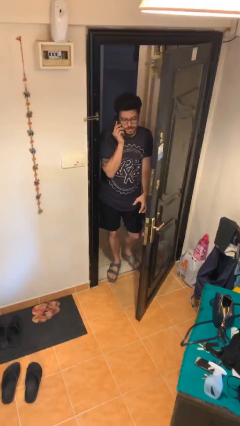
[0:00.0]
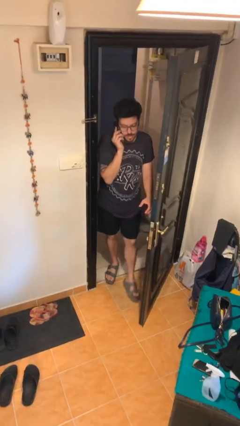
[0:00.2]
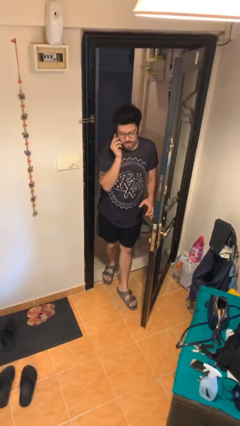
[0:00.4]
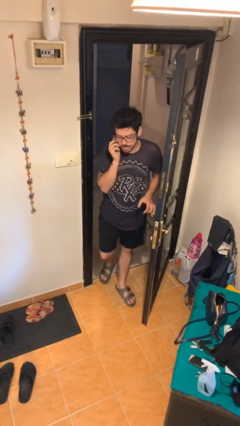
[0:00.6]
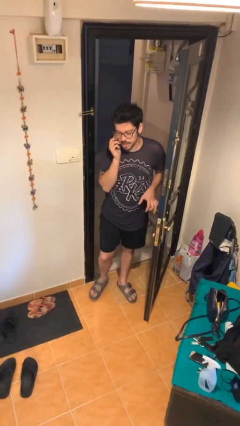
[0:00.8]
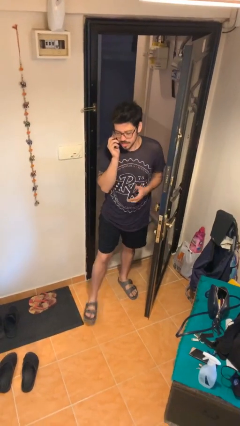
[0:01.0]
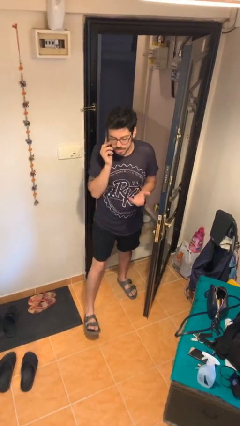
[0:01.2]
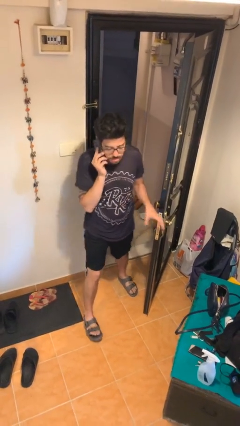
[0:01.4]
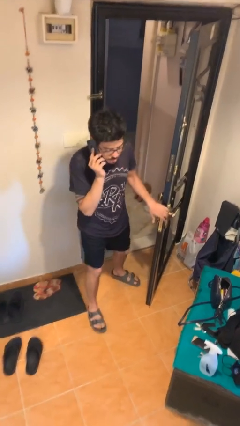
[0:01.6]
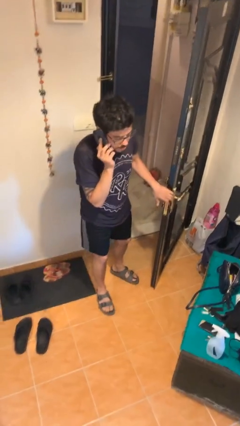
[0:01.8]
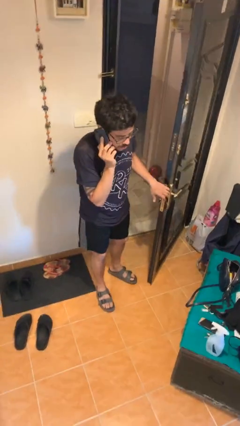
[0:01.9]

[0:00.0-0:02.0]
person enters scene through structure

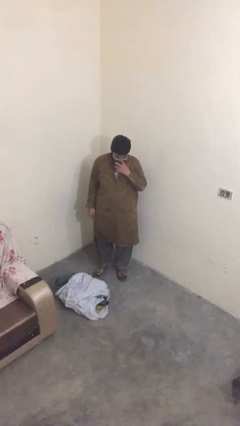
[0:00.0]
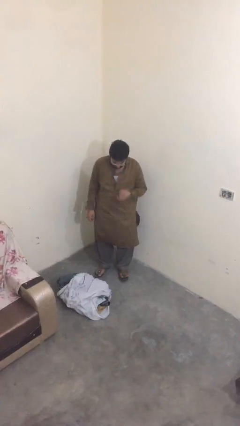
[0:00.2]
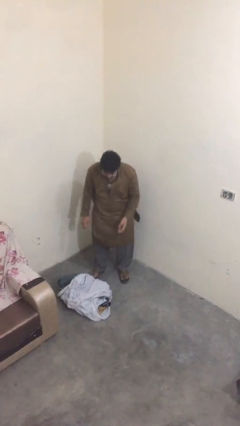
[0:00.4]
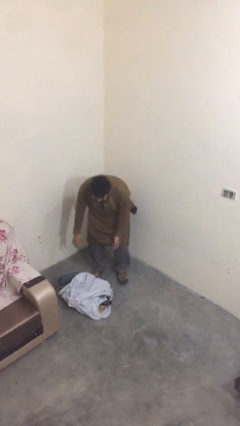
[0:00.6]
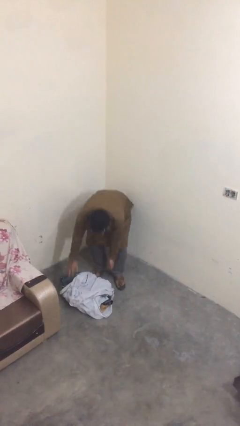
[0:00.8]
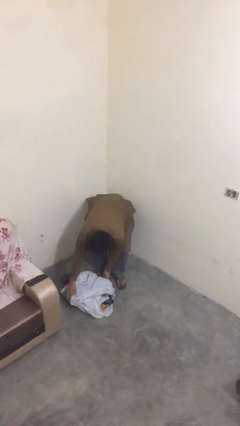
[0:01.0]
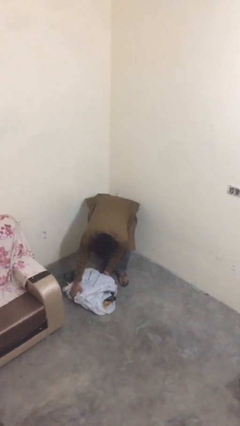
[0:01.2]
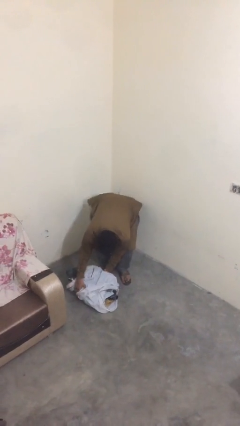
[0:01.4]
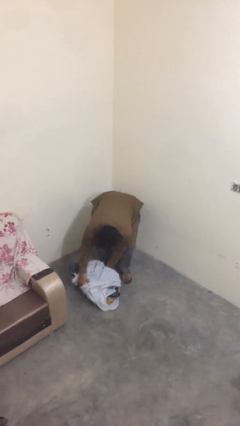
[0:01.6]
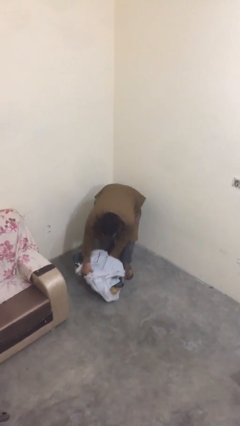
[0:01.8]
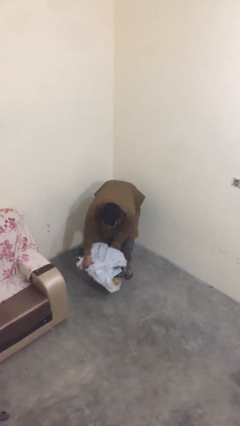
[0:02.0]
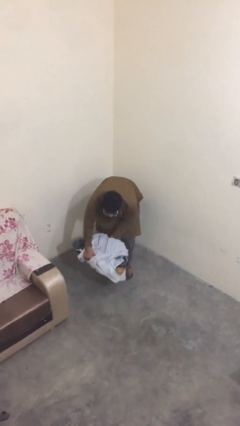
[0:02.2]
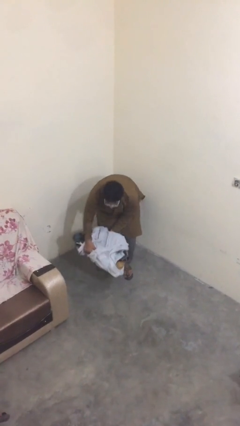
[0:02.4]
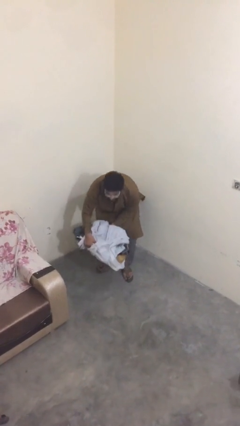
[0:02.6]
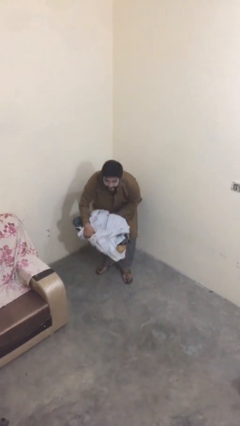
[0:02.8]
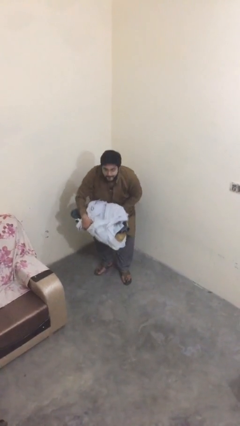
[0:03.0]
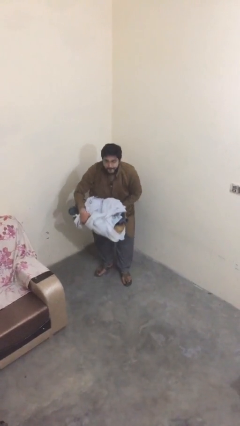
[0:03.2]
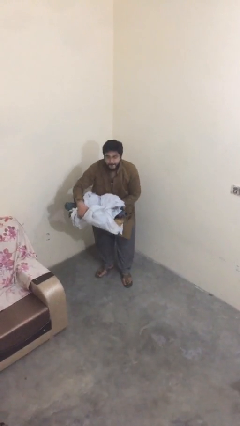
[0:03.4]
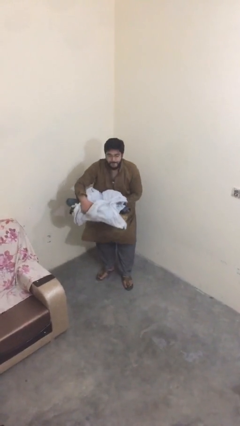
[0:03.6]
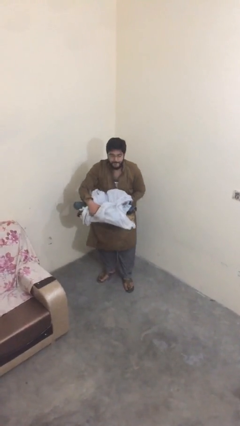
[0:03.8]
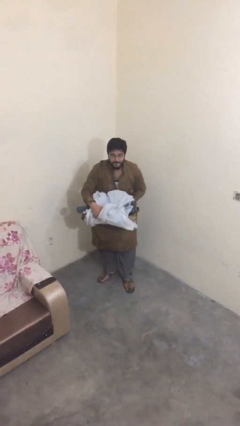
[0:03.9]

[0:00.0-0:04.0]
person picks up object from floor

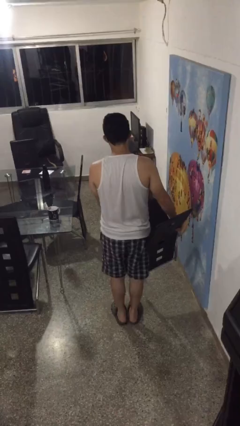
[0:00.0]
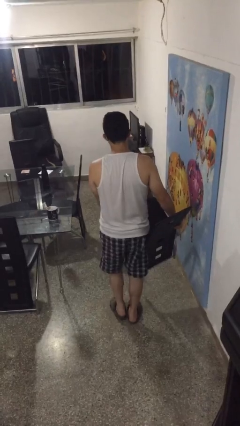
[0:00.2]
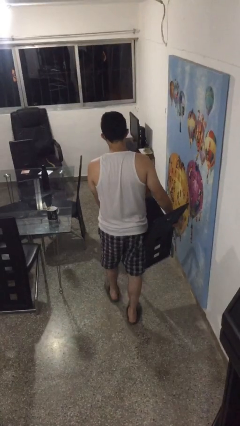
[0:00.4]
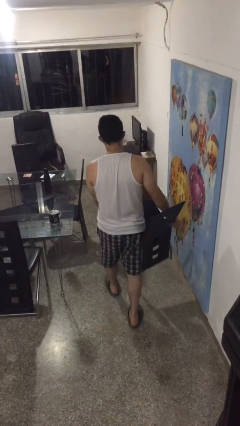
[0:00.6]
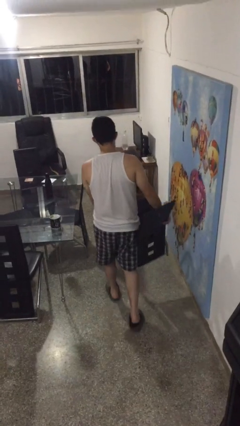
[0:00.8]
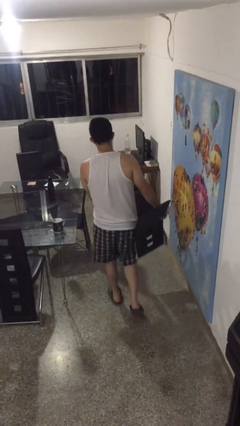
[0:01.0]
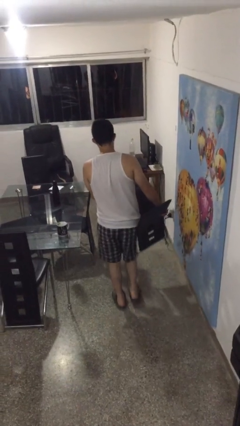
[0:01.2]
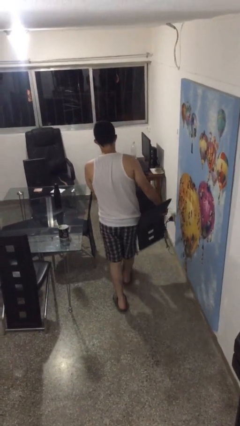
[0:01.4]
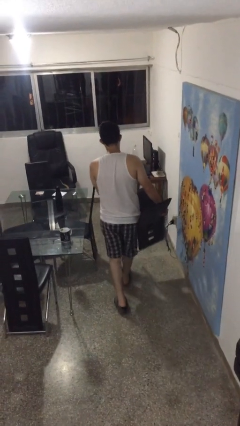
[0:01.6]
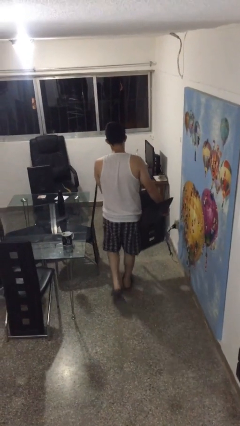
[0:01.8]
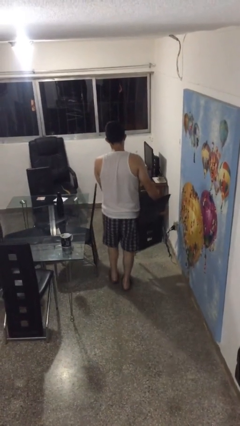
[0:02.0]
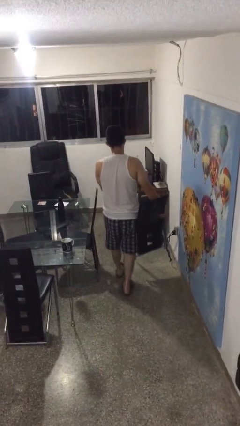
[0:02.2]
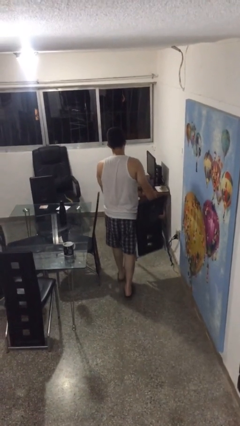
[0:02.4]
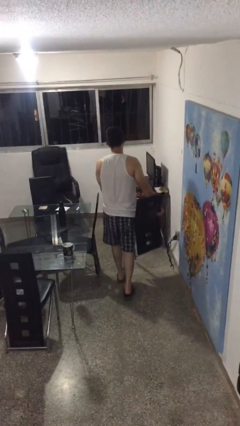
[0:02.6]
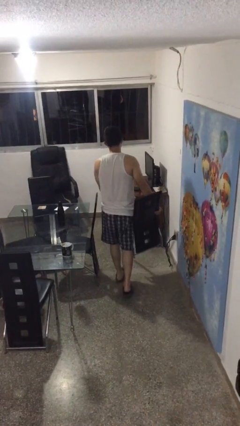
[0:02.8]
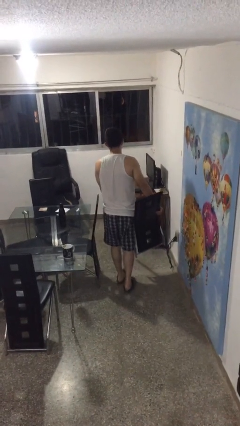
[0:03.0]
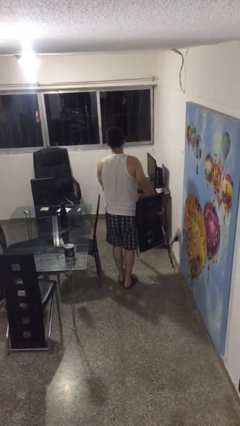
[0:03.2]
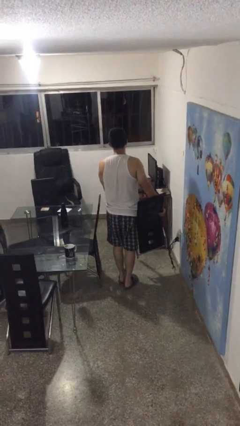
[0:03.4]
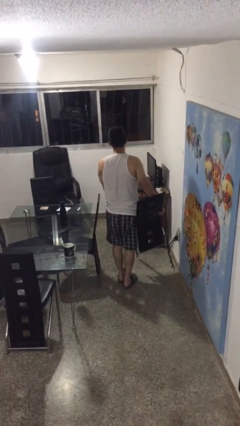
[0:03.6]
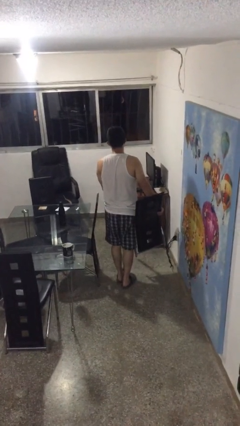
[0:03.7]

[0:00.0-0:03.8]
person carries furniture

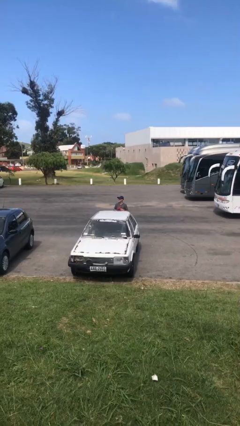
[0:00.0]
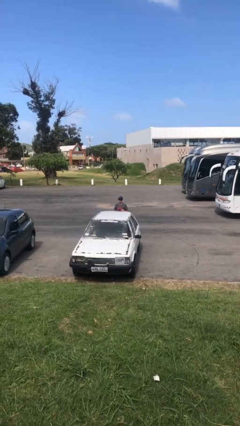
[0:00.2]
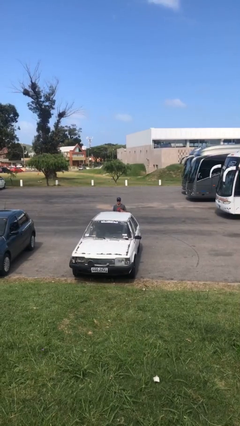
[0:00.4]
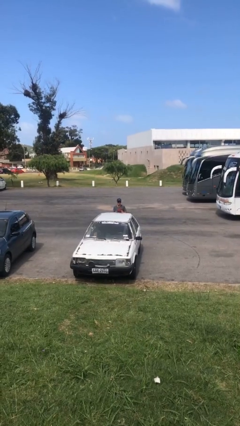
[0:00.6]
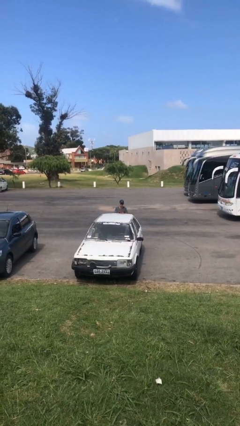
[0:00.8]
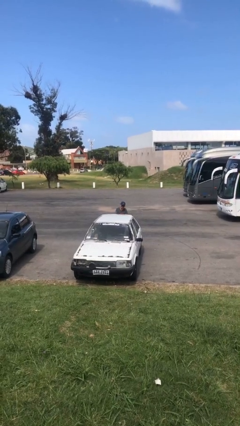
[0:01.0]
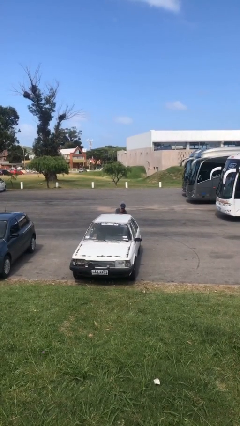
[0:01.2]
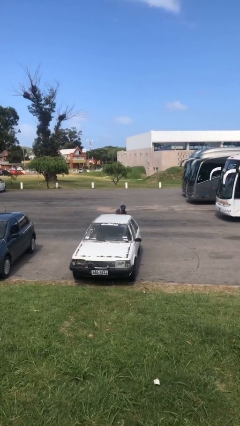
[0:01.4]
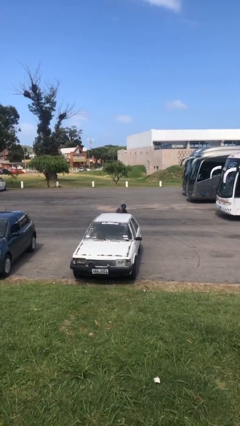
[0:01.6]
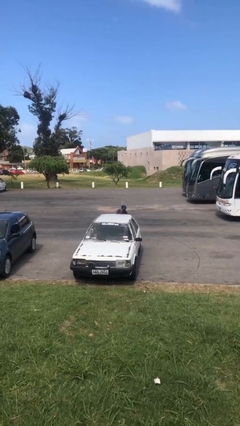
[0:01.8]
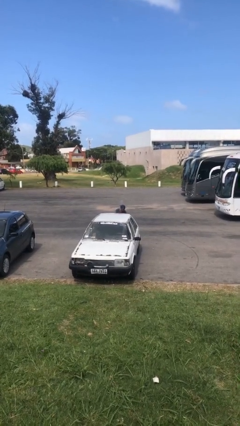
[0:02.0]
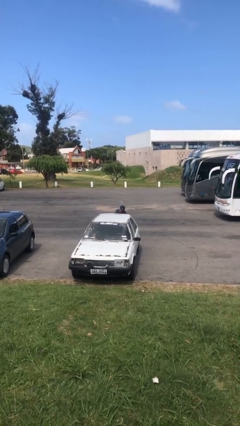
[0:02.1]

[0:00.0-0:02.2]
person loads car

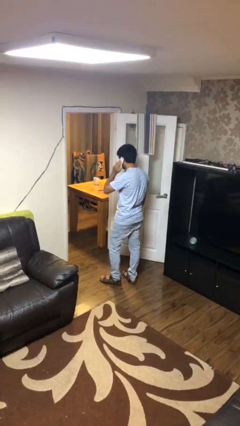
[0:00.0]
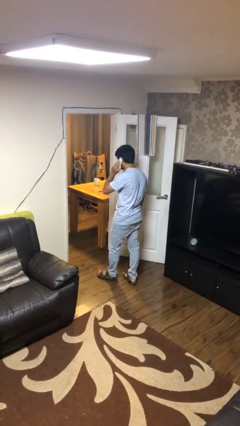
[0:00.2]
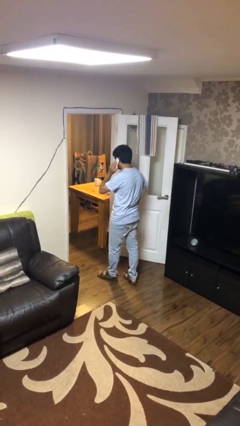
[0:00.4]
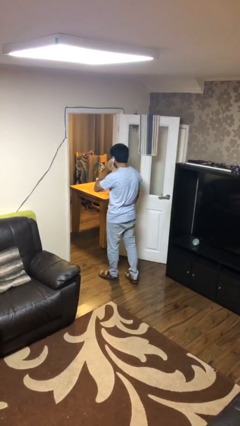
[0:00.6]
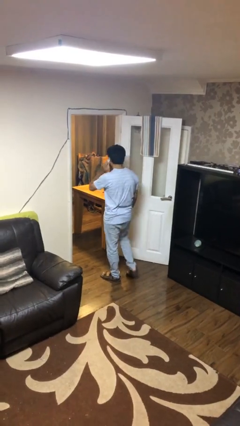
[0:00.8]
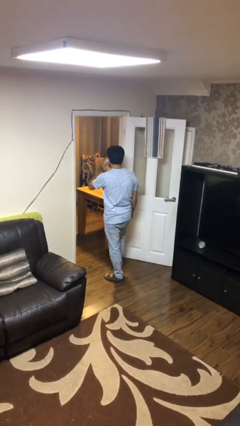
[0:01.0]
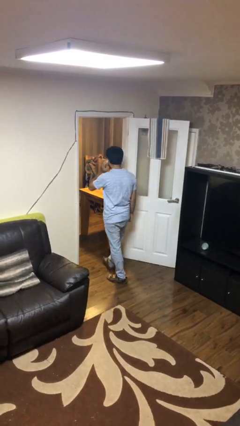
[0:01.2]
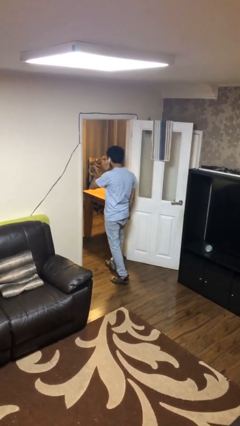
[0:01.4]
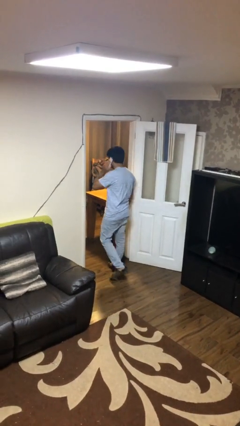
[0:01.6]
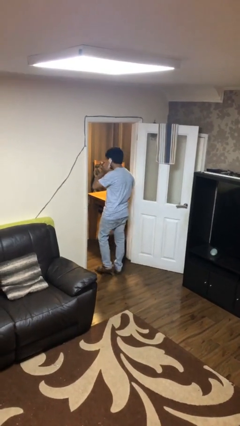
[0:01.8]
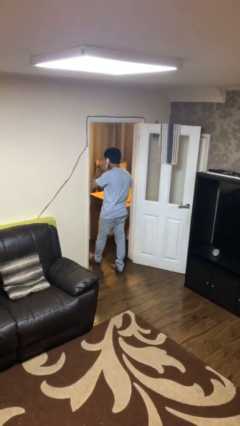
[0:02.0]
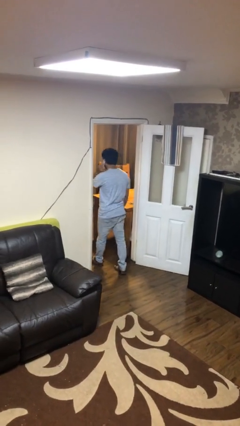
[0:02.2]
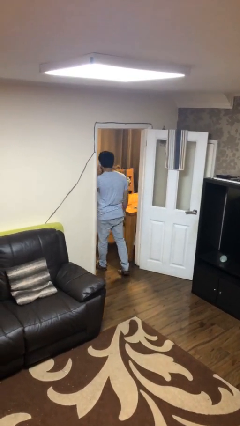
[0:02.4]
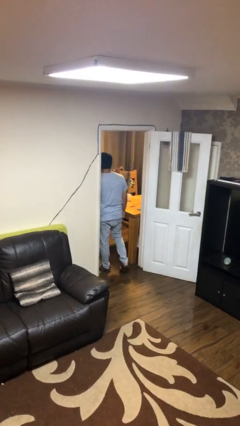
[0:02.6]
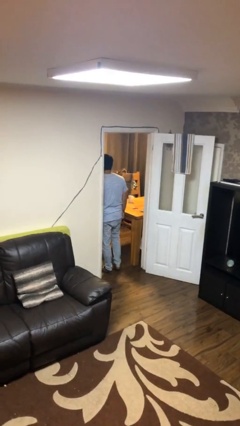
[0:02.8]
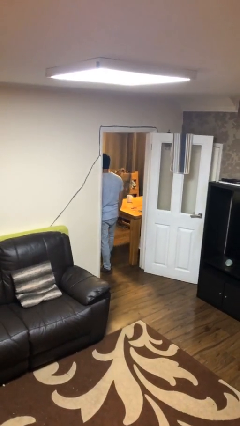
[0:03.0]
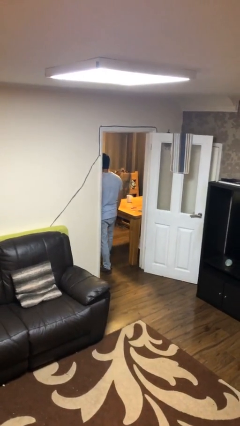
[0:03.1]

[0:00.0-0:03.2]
person exits scene through structure

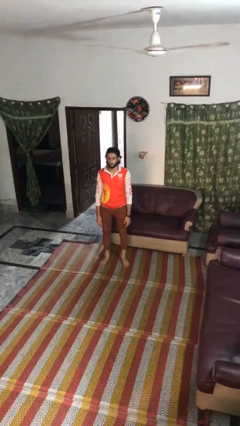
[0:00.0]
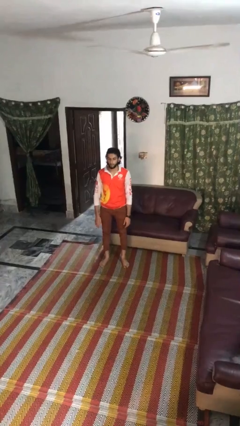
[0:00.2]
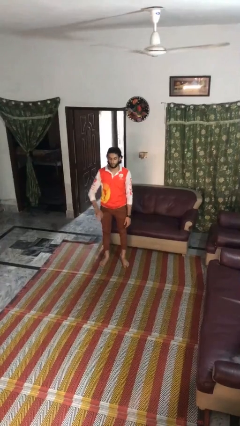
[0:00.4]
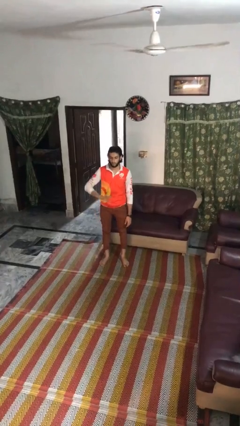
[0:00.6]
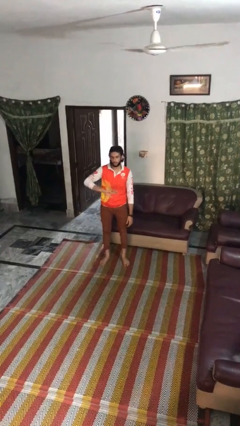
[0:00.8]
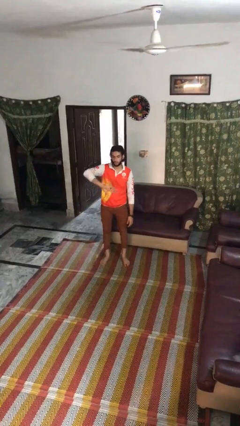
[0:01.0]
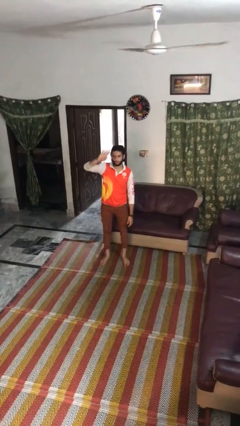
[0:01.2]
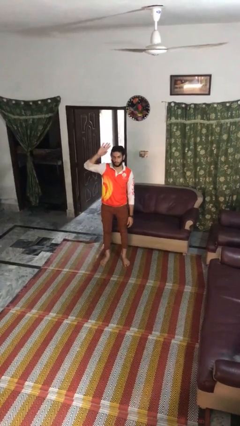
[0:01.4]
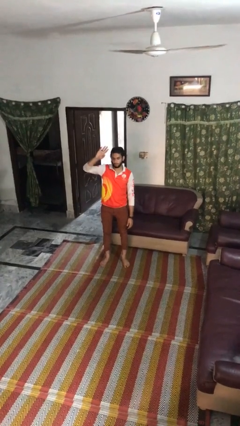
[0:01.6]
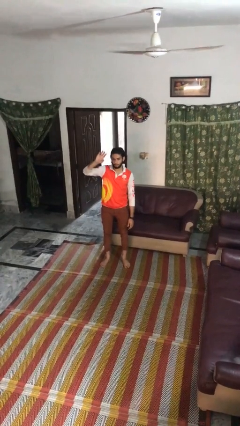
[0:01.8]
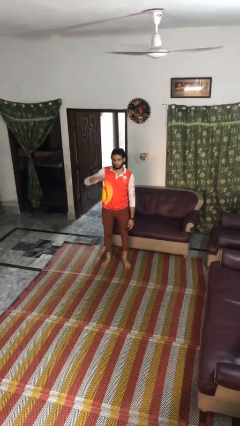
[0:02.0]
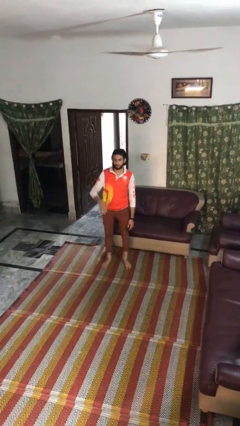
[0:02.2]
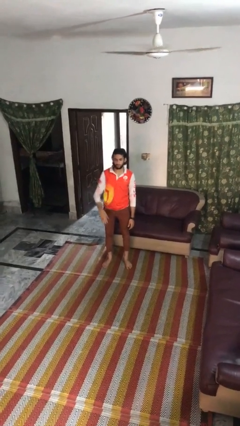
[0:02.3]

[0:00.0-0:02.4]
person gestures swipe up

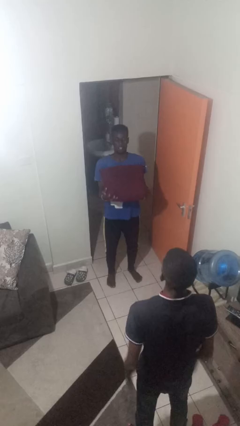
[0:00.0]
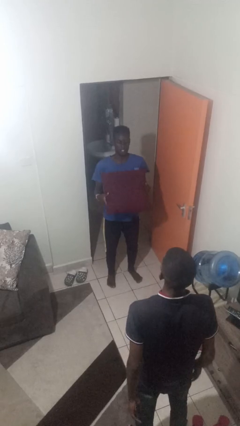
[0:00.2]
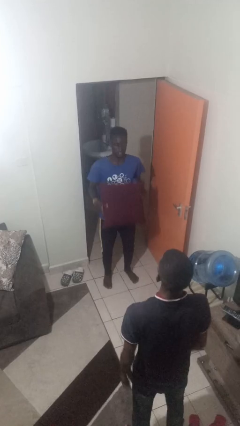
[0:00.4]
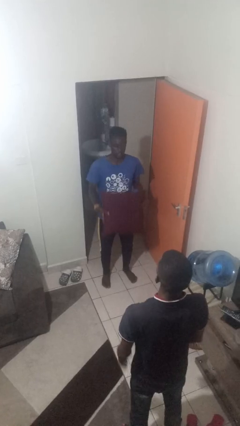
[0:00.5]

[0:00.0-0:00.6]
person catches object from person
